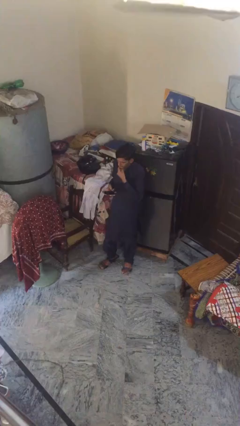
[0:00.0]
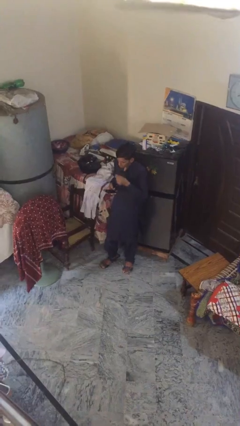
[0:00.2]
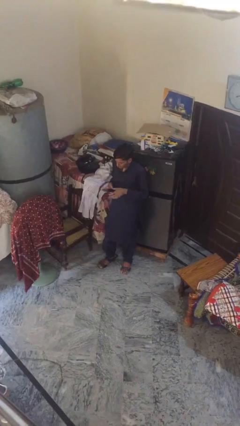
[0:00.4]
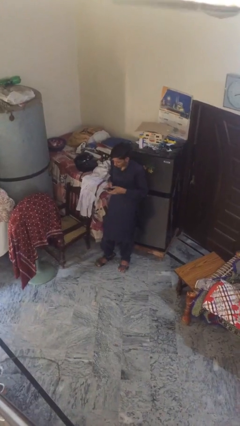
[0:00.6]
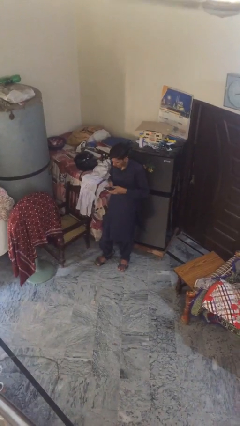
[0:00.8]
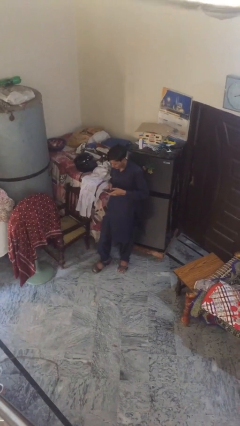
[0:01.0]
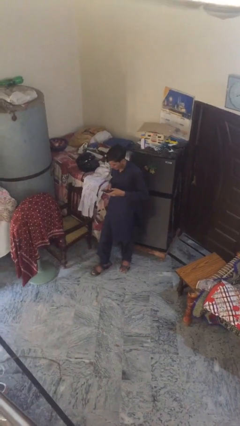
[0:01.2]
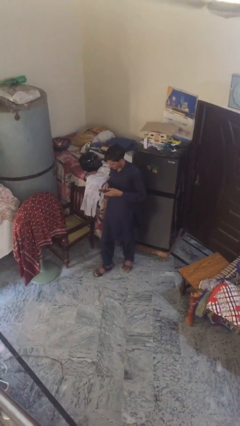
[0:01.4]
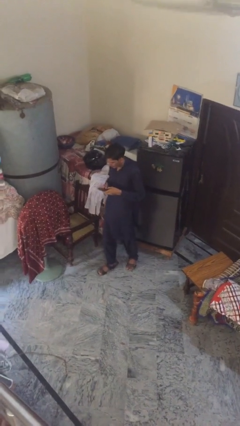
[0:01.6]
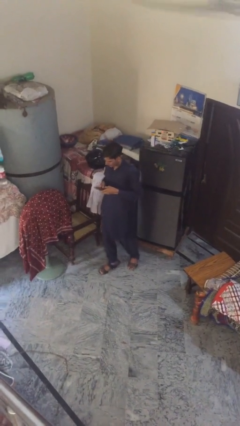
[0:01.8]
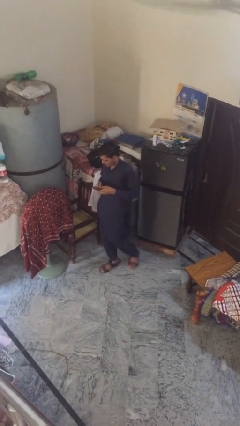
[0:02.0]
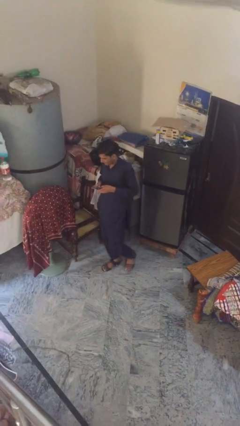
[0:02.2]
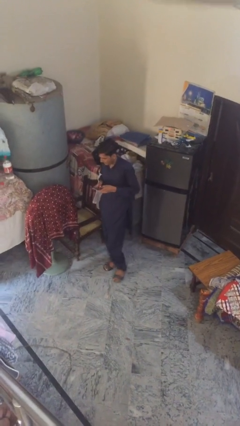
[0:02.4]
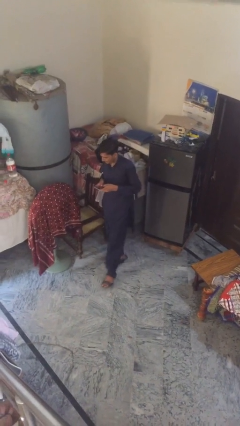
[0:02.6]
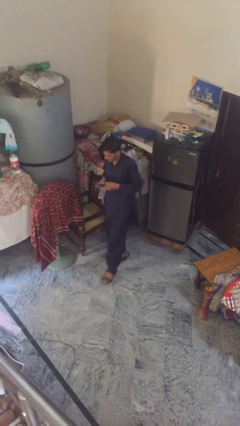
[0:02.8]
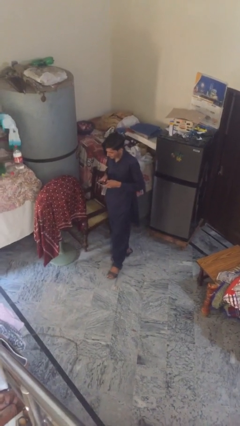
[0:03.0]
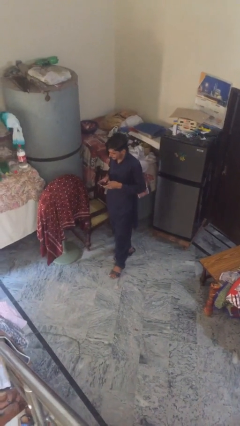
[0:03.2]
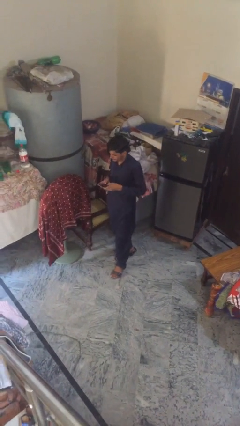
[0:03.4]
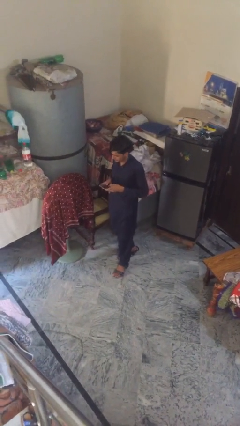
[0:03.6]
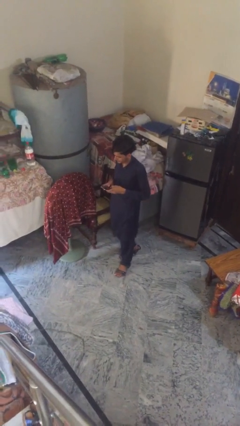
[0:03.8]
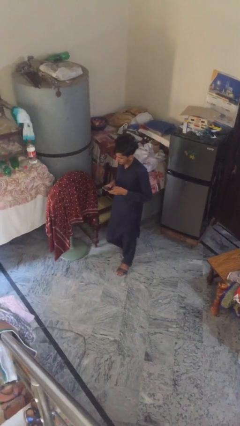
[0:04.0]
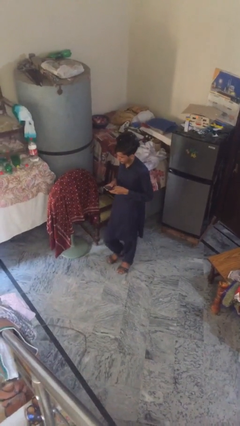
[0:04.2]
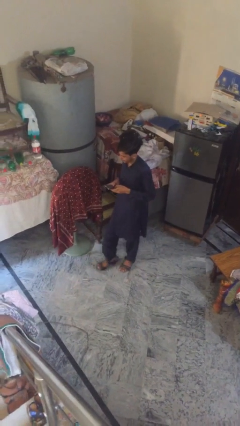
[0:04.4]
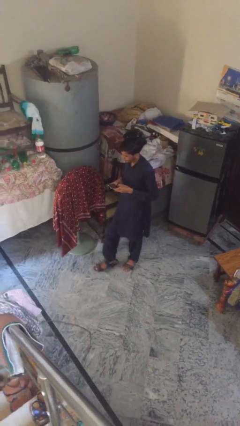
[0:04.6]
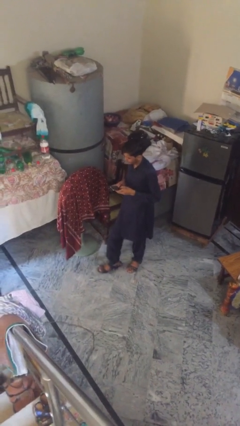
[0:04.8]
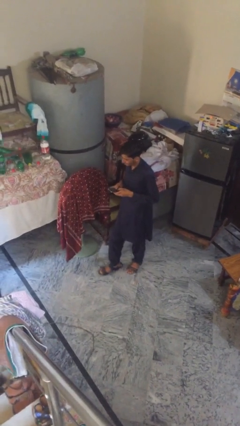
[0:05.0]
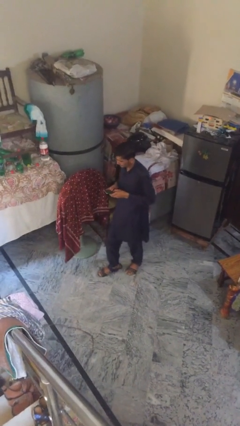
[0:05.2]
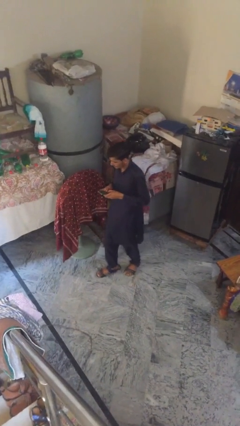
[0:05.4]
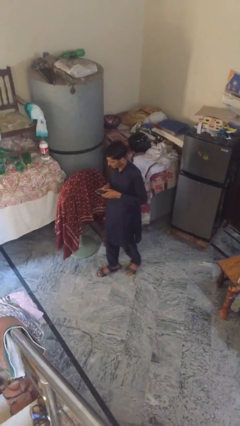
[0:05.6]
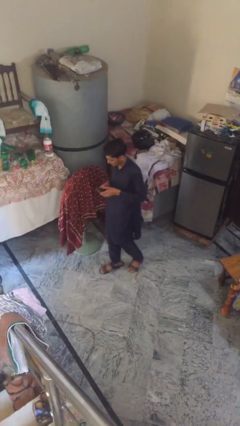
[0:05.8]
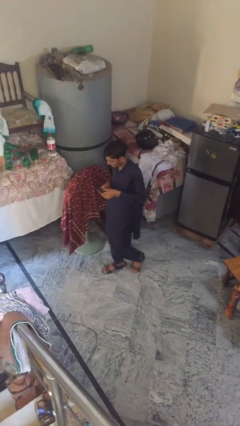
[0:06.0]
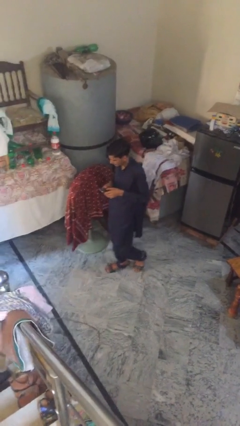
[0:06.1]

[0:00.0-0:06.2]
person texts on phone

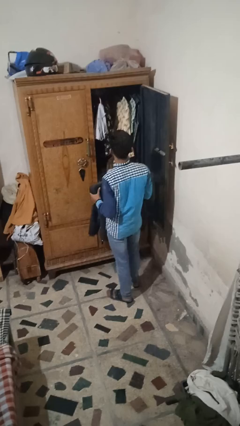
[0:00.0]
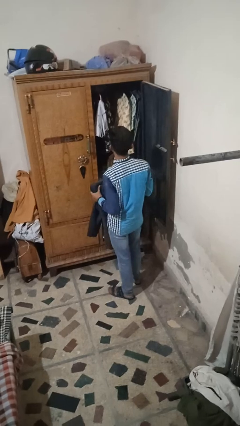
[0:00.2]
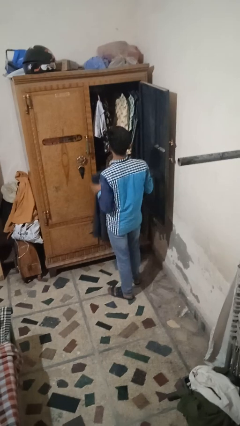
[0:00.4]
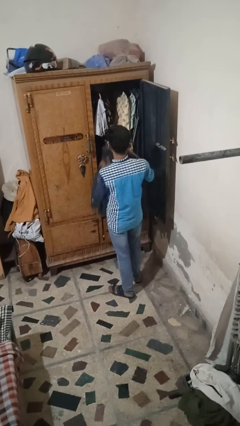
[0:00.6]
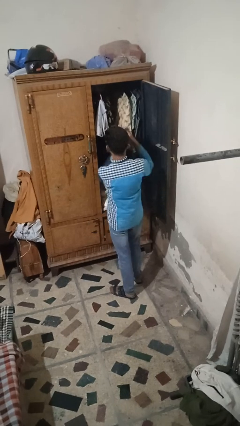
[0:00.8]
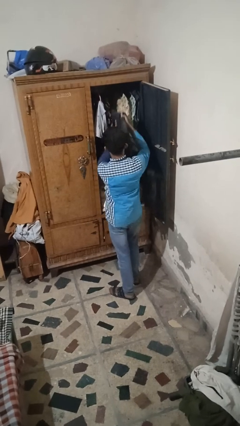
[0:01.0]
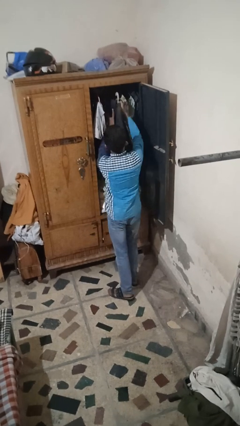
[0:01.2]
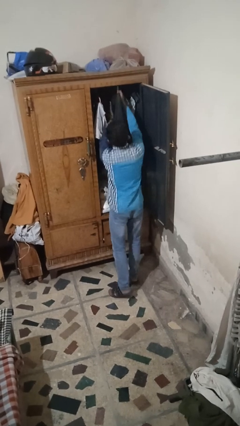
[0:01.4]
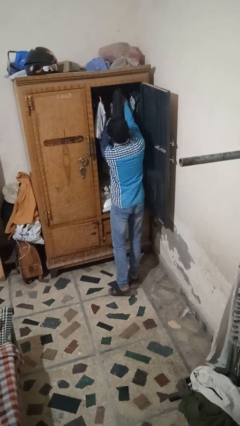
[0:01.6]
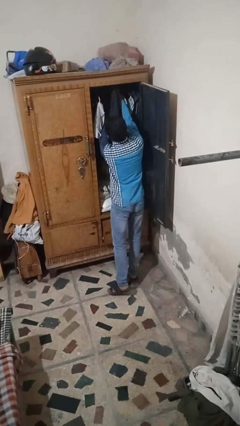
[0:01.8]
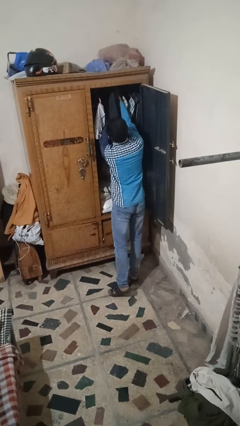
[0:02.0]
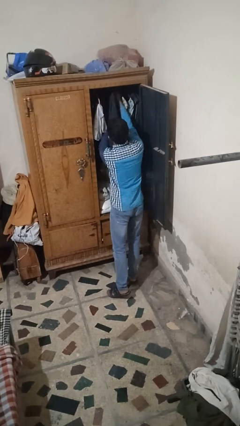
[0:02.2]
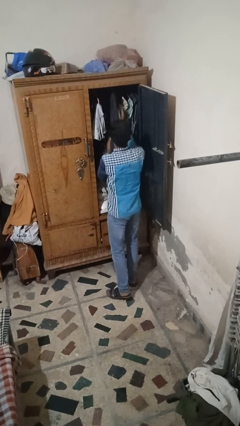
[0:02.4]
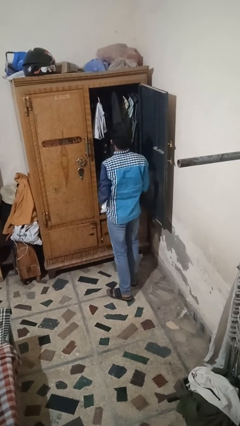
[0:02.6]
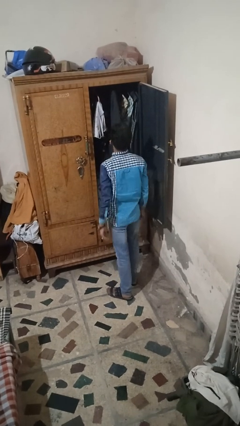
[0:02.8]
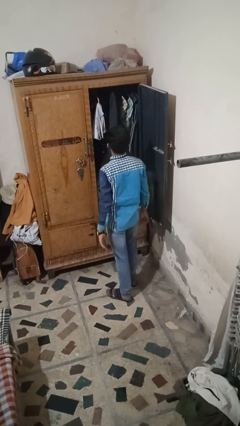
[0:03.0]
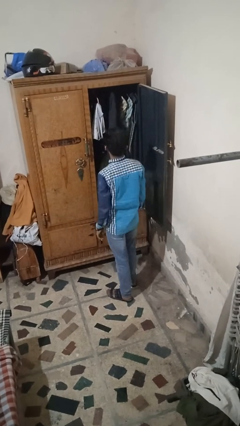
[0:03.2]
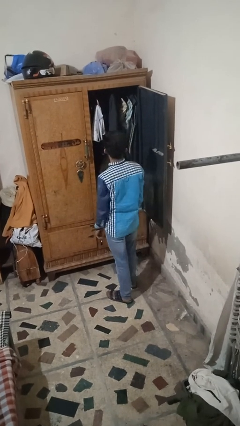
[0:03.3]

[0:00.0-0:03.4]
person puts clothes into closet

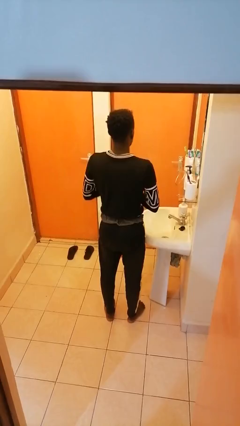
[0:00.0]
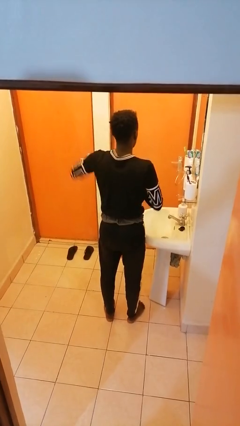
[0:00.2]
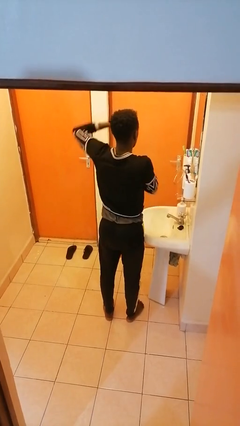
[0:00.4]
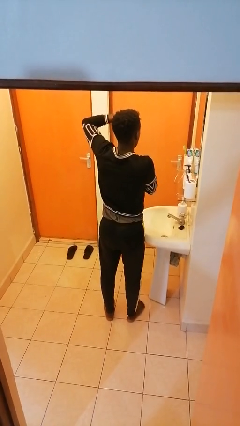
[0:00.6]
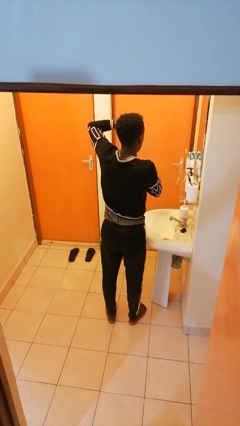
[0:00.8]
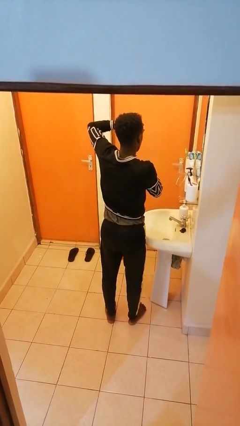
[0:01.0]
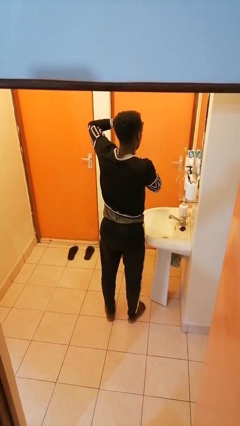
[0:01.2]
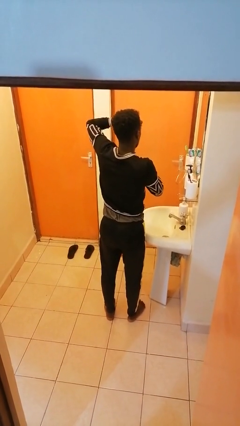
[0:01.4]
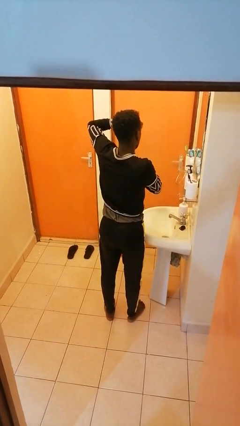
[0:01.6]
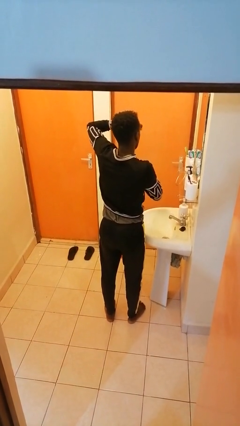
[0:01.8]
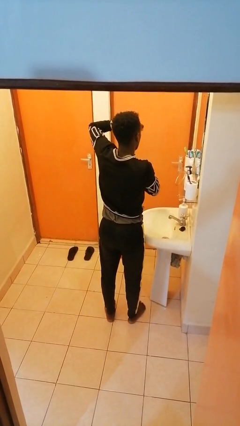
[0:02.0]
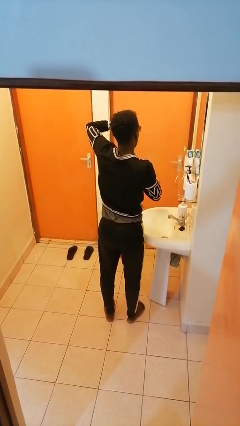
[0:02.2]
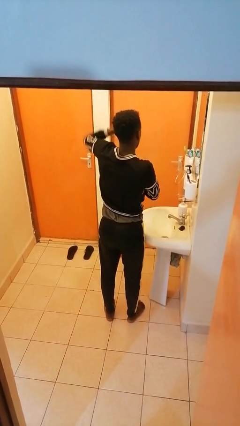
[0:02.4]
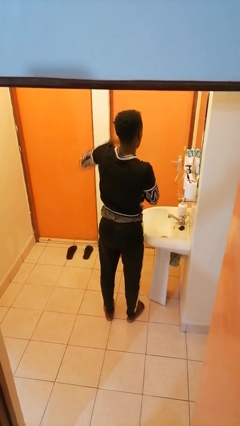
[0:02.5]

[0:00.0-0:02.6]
person applies deodorant

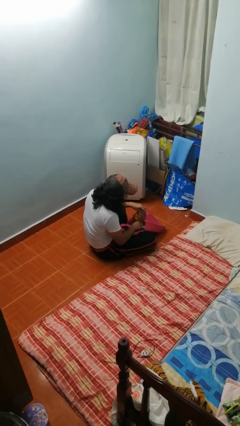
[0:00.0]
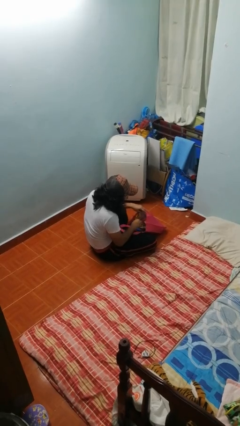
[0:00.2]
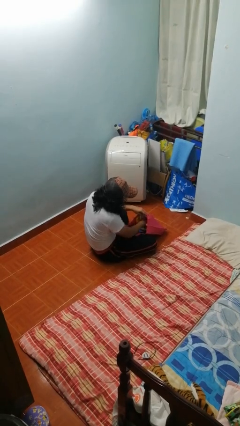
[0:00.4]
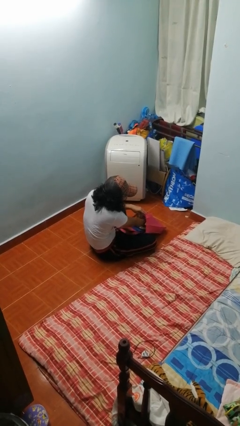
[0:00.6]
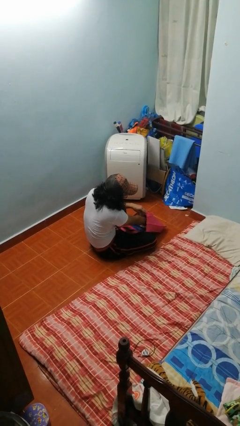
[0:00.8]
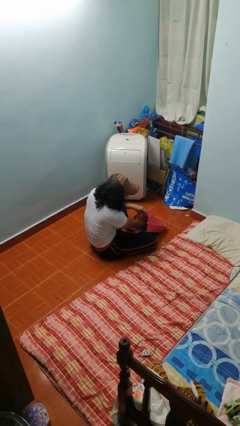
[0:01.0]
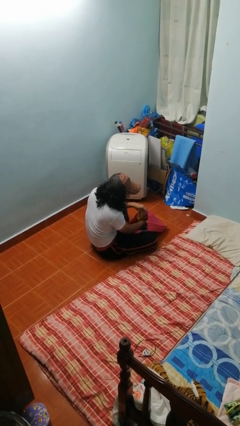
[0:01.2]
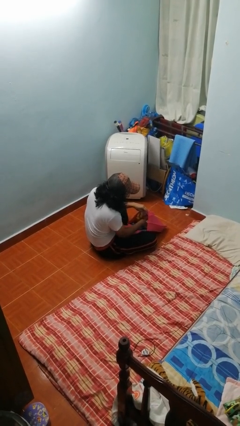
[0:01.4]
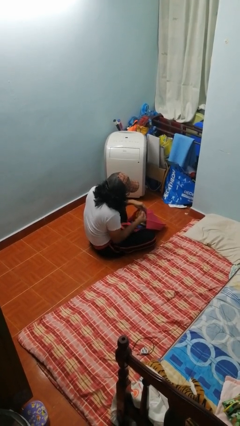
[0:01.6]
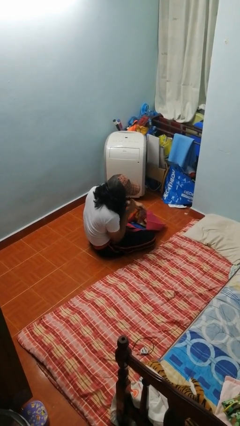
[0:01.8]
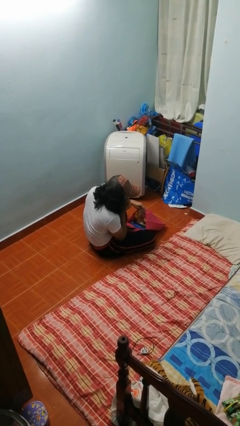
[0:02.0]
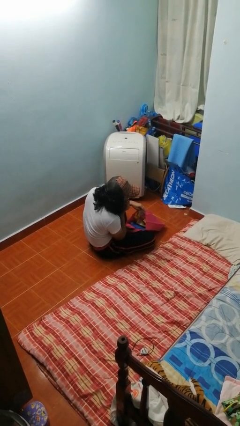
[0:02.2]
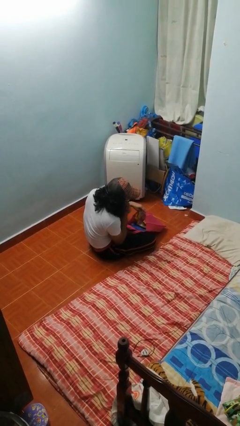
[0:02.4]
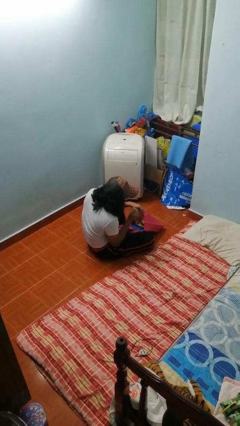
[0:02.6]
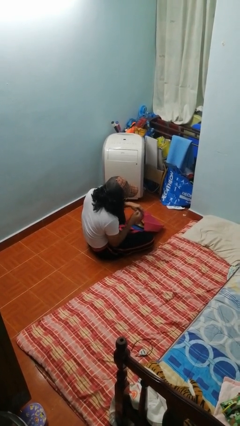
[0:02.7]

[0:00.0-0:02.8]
person eats snack from bag

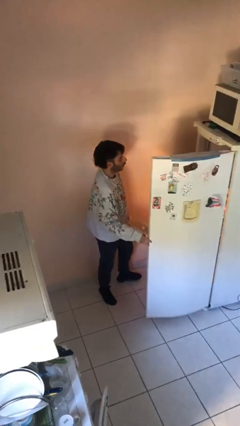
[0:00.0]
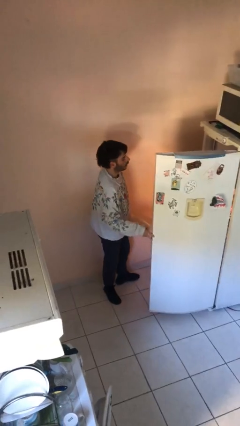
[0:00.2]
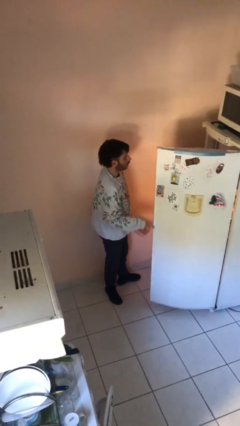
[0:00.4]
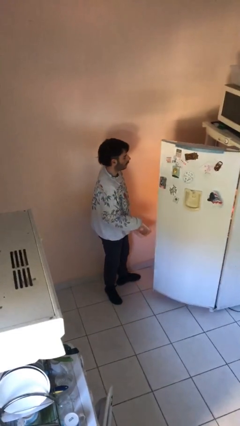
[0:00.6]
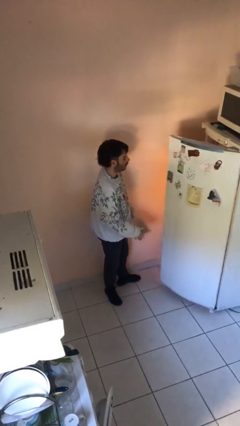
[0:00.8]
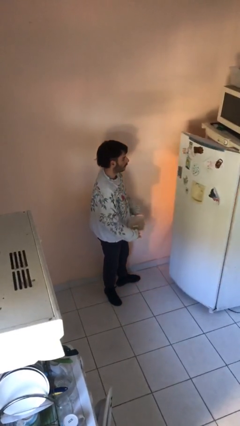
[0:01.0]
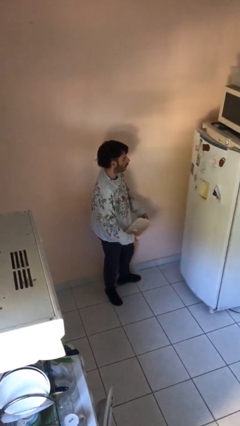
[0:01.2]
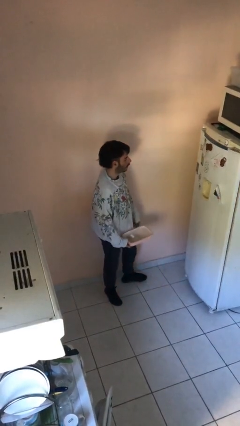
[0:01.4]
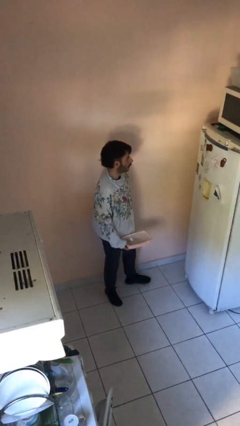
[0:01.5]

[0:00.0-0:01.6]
person closes refrigerator

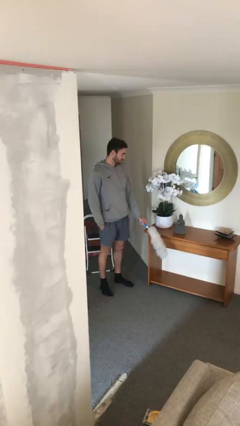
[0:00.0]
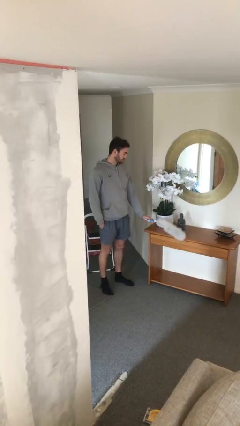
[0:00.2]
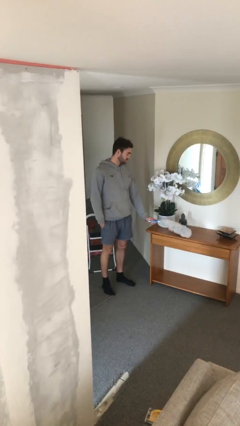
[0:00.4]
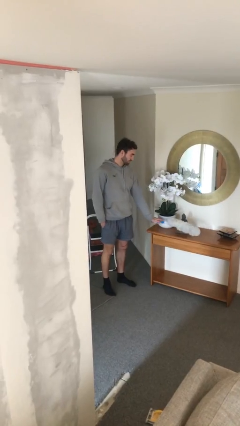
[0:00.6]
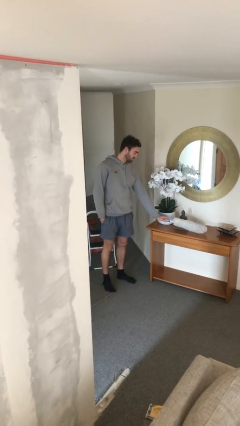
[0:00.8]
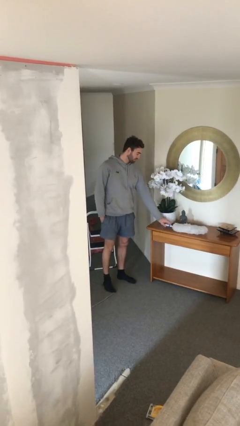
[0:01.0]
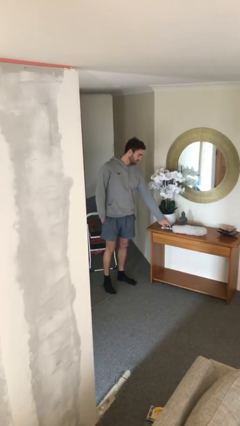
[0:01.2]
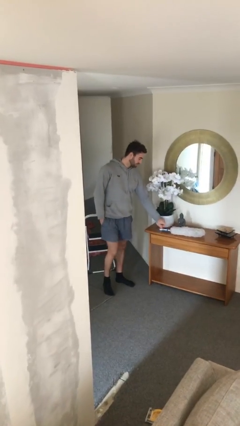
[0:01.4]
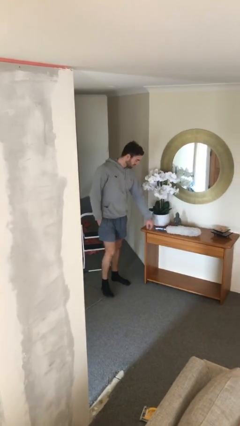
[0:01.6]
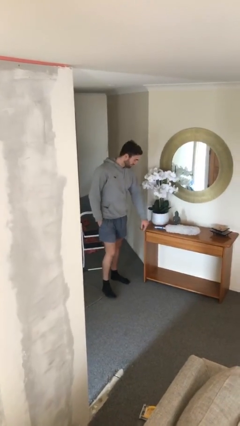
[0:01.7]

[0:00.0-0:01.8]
person puts down object on table
